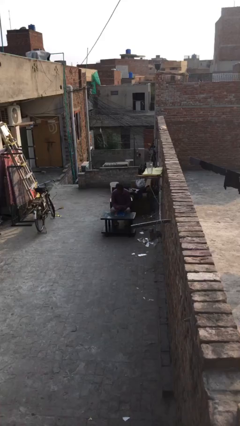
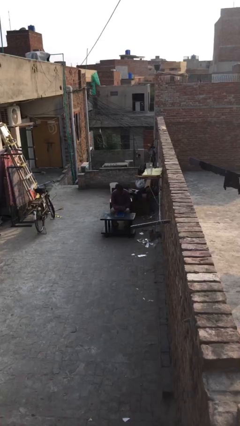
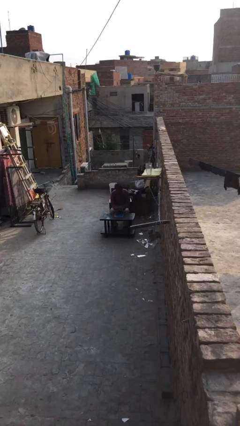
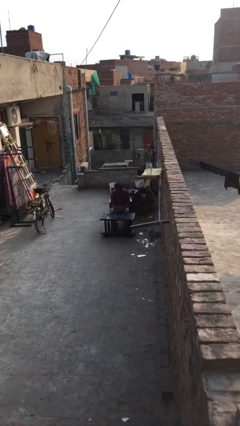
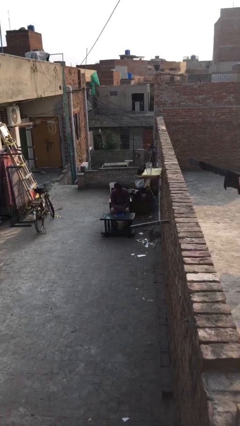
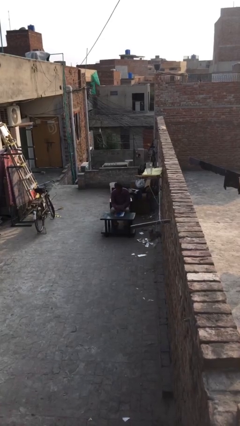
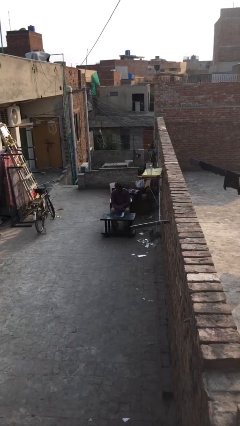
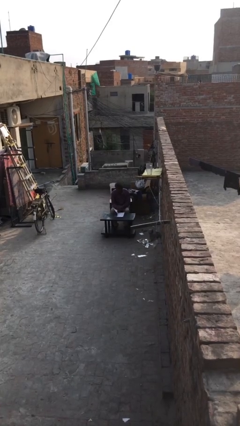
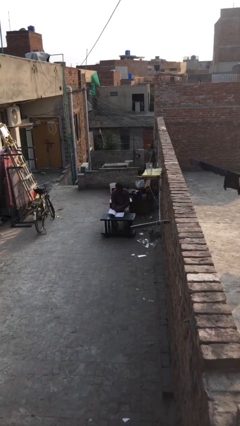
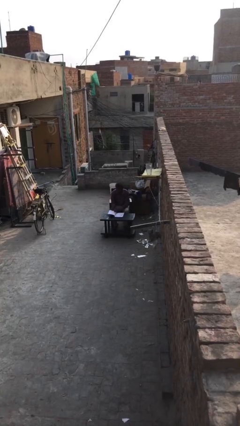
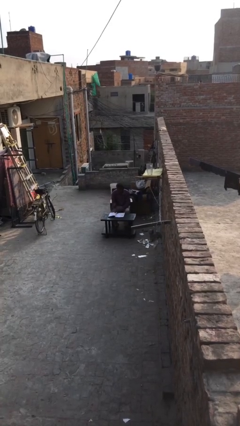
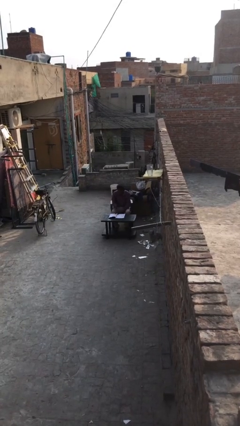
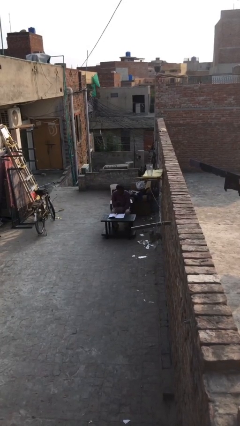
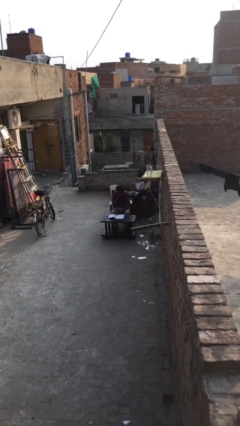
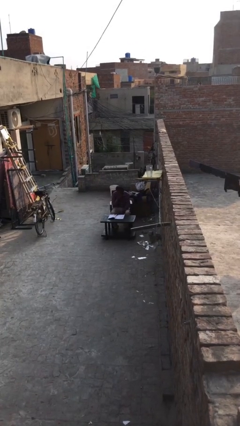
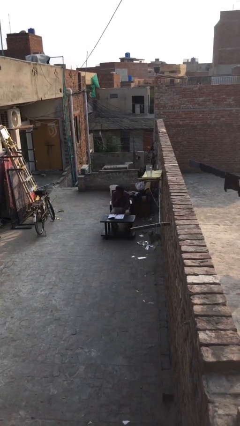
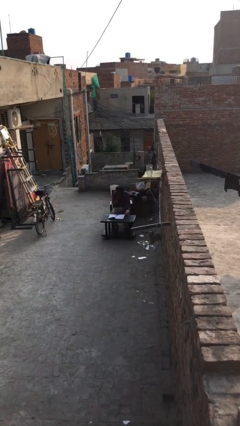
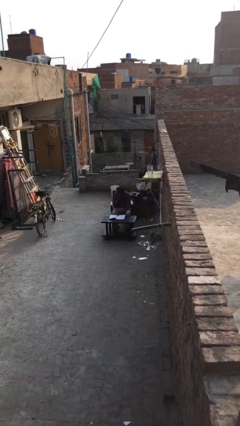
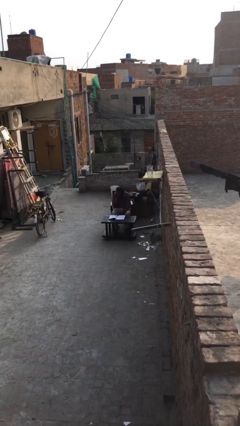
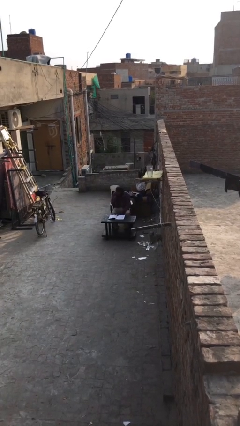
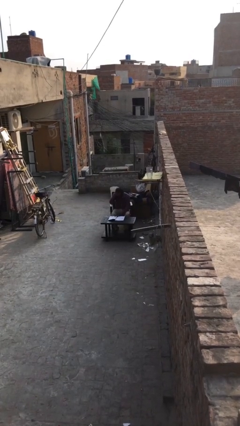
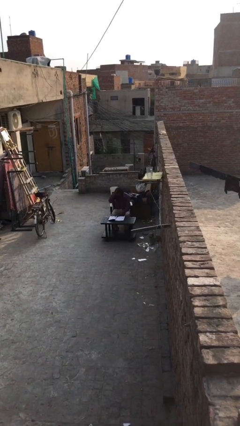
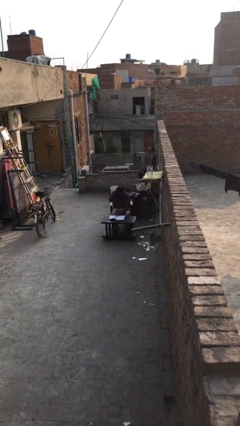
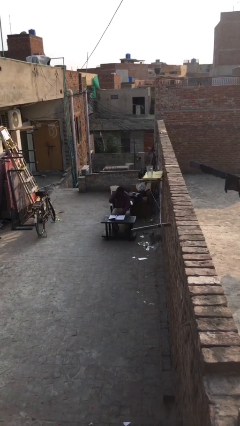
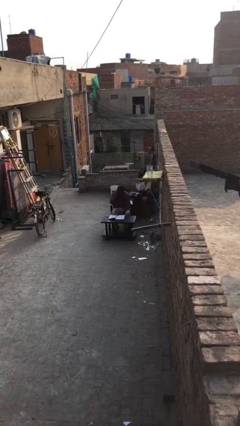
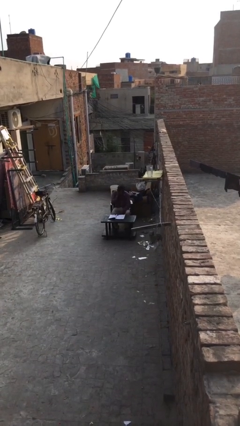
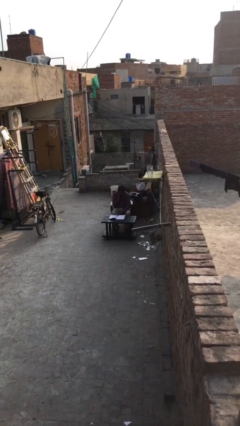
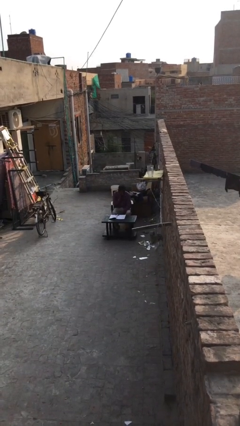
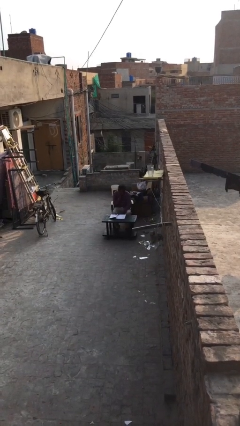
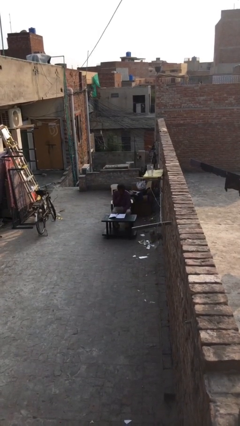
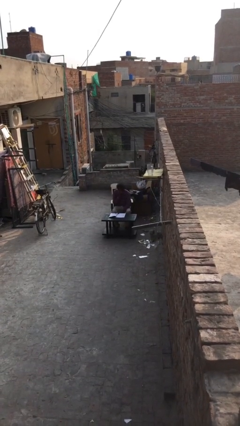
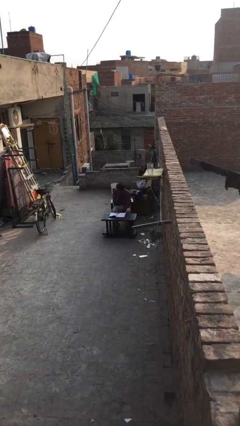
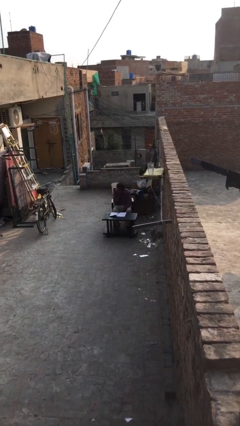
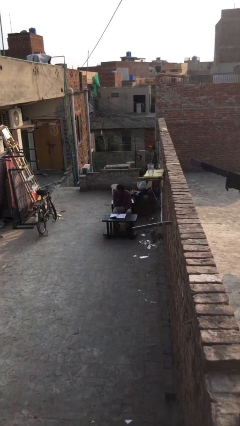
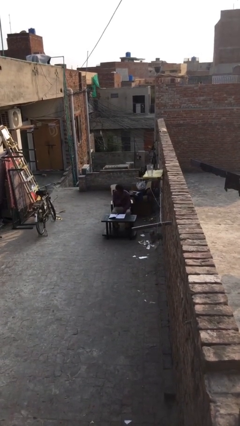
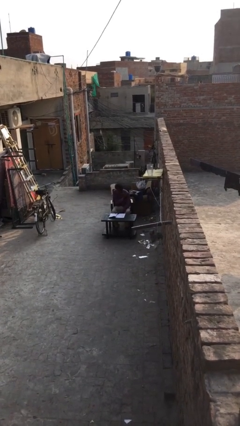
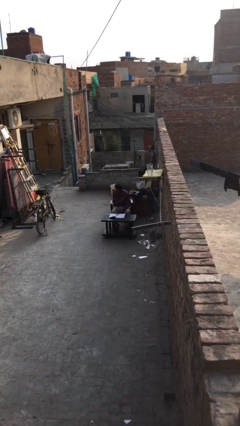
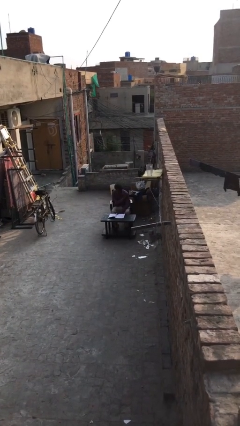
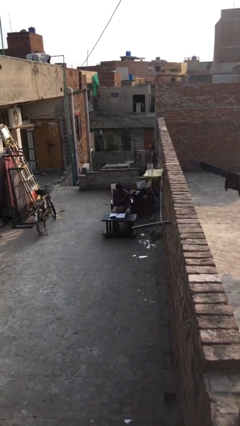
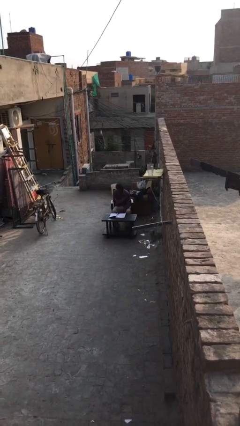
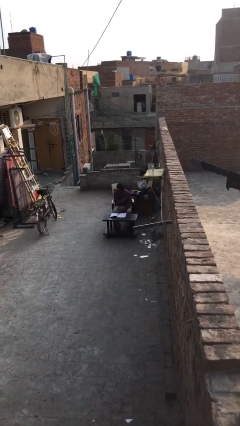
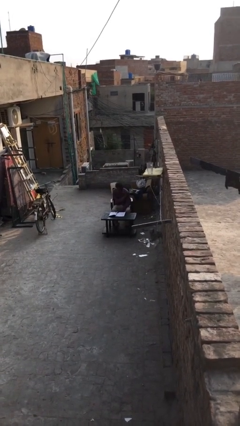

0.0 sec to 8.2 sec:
person reads document

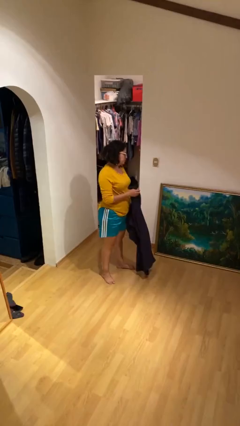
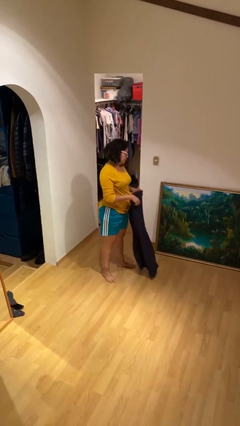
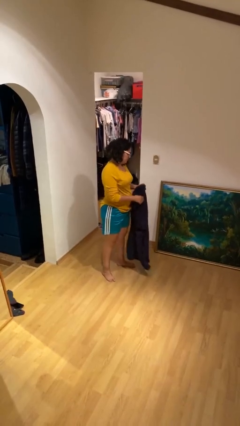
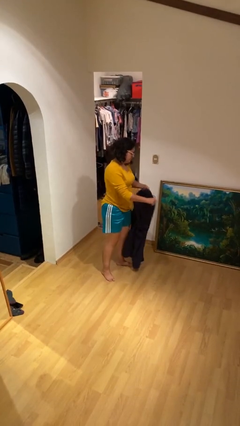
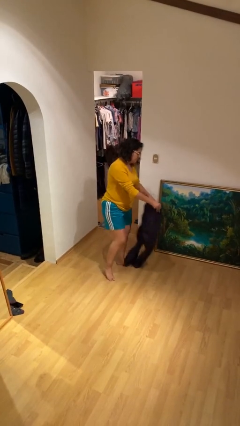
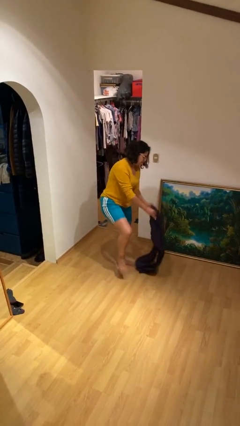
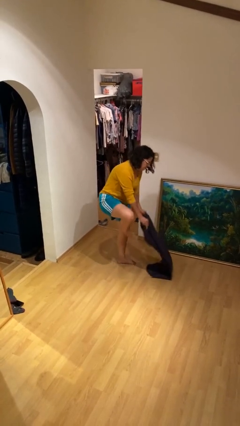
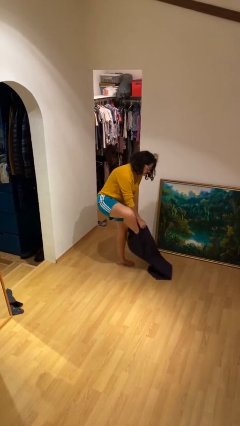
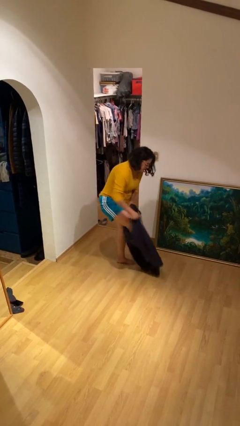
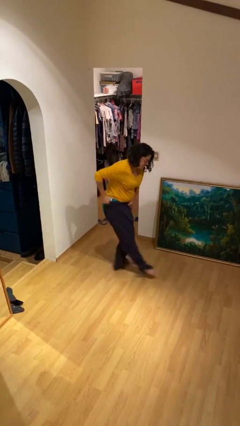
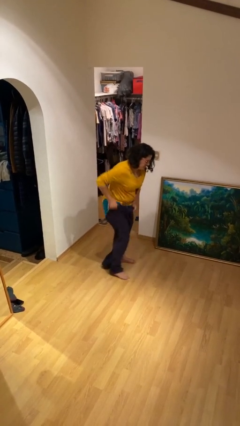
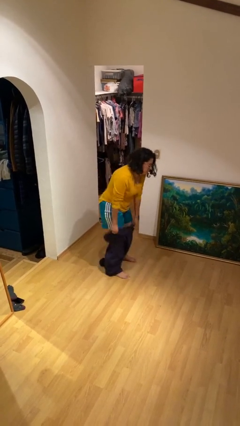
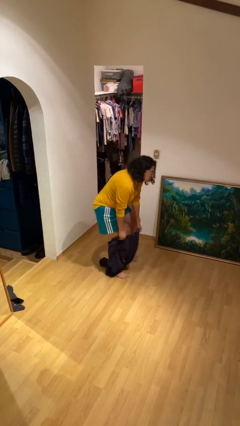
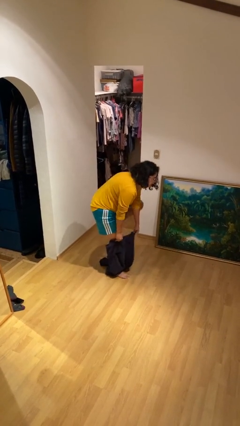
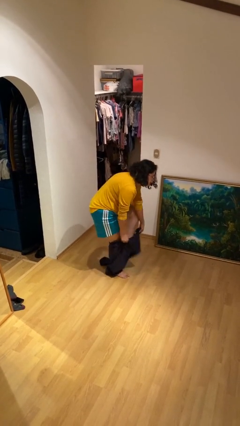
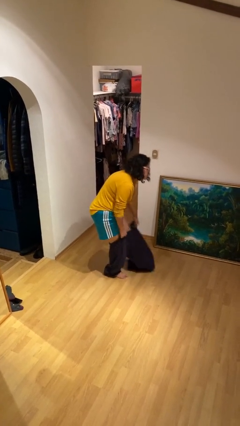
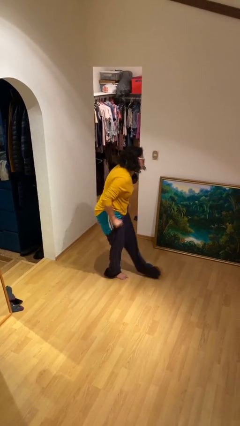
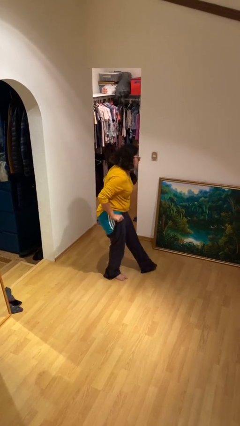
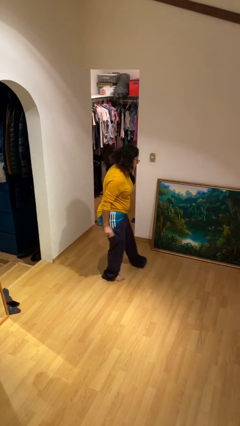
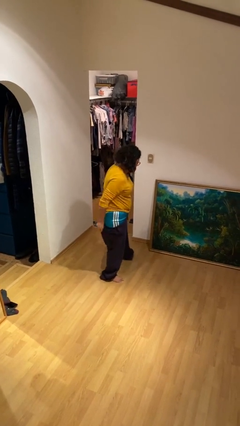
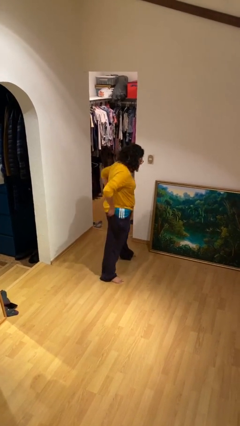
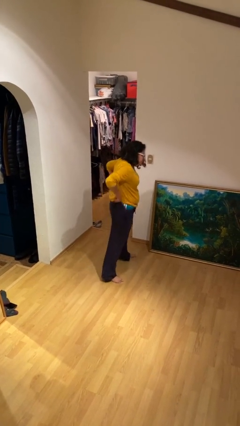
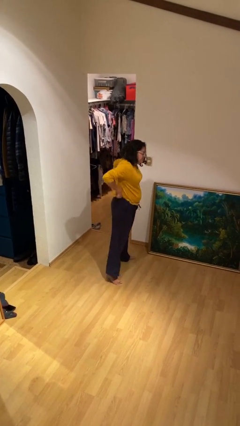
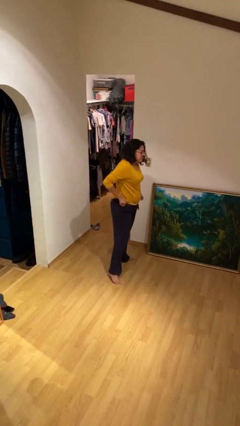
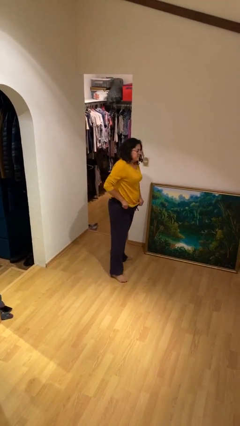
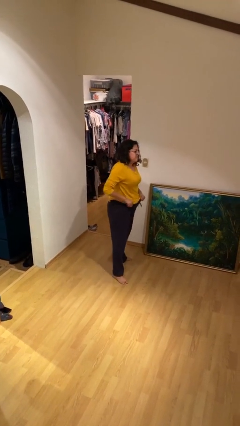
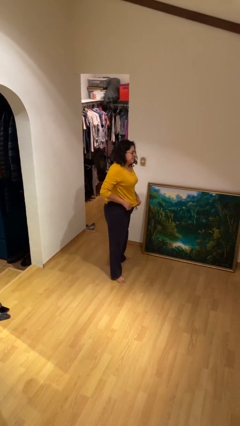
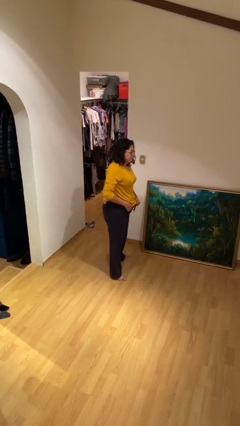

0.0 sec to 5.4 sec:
person puts on pants

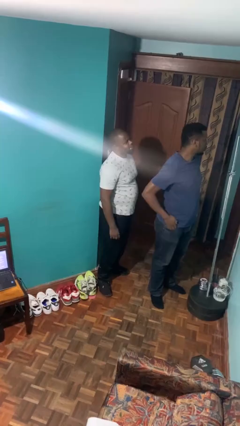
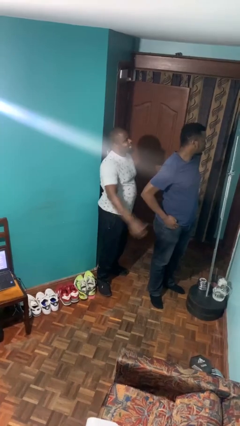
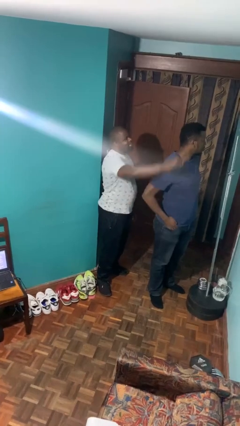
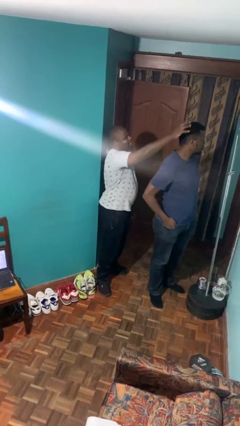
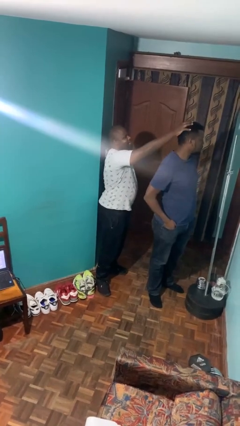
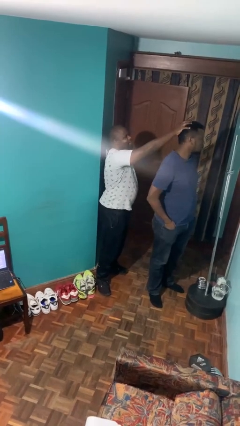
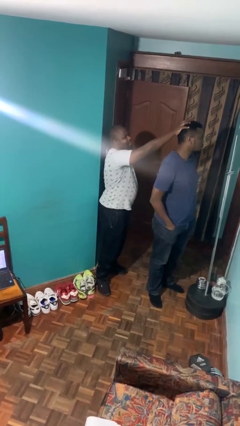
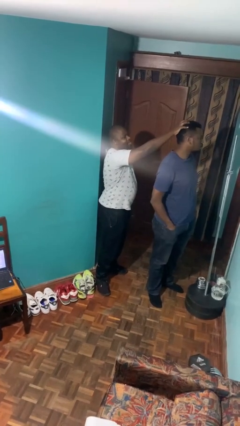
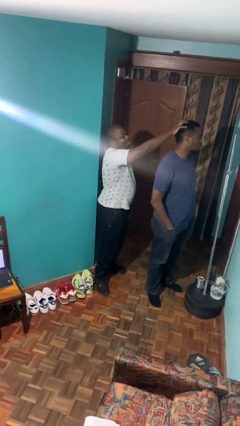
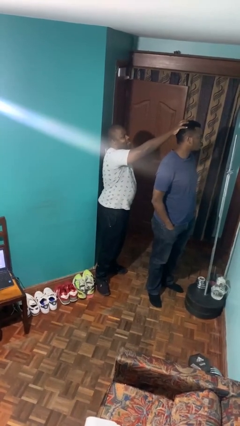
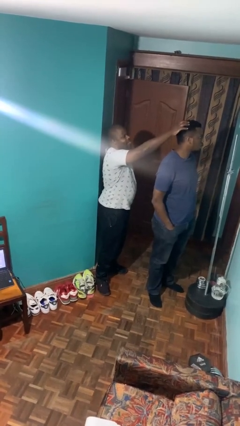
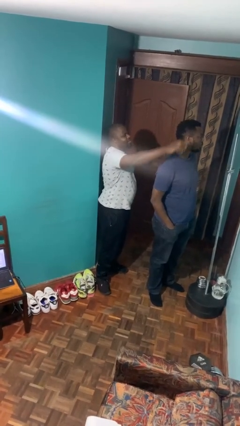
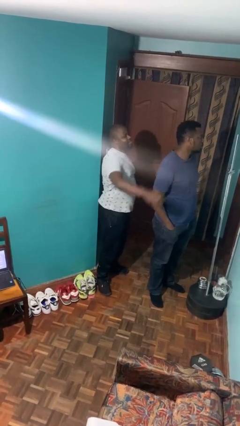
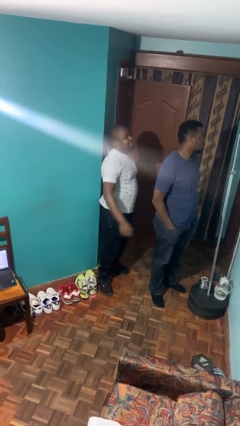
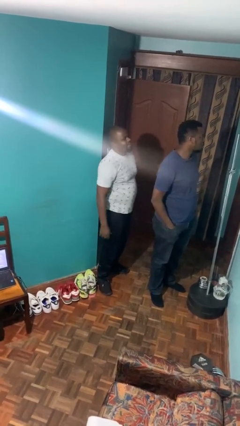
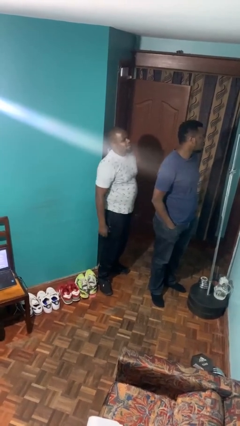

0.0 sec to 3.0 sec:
person grabs person by hair

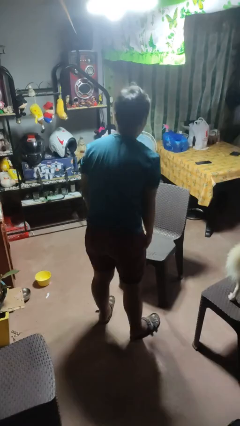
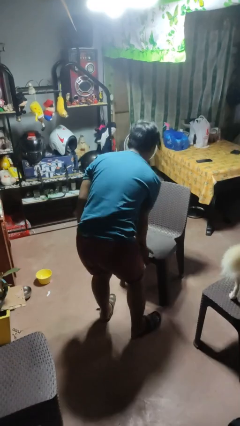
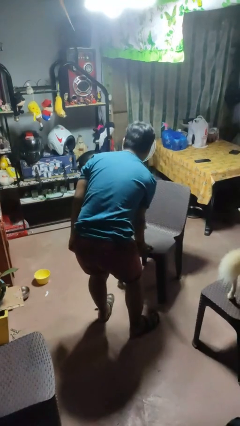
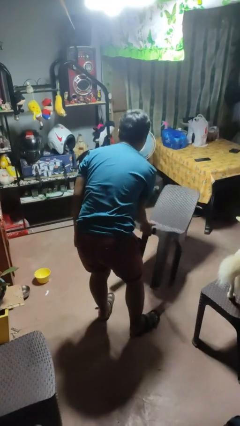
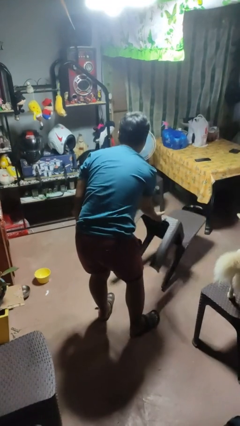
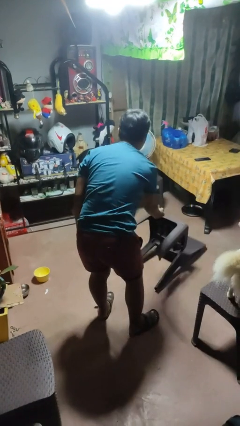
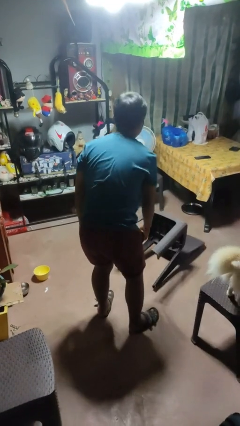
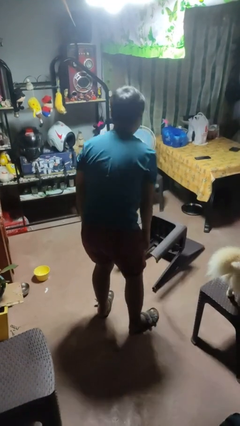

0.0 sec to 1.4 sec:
person knocks over furniture
